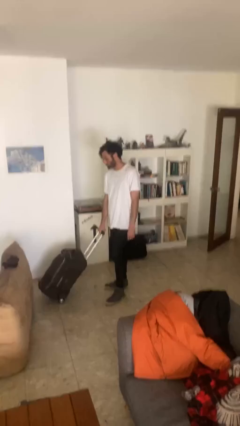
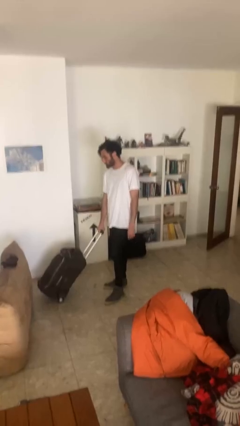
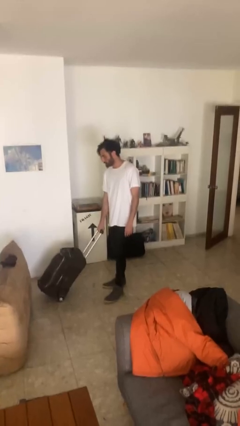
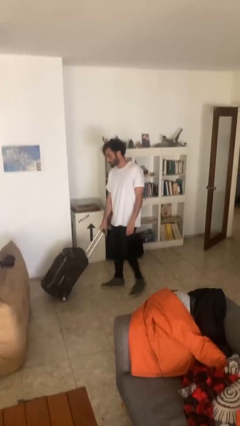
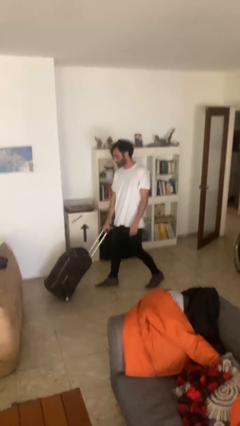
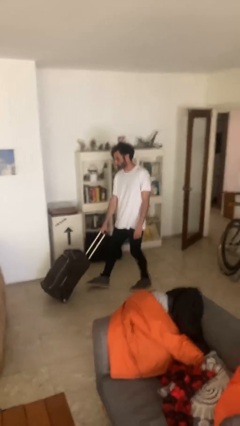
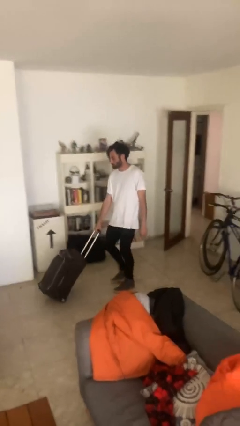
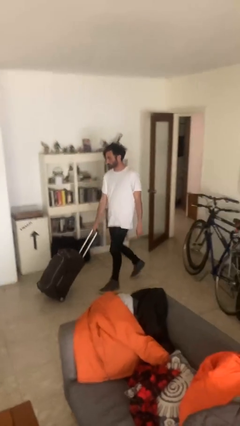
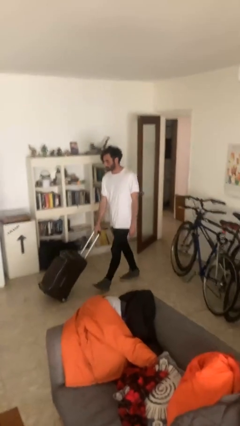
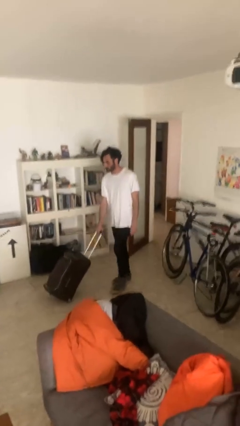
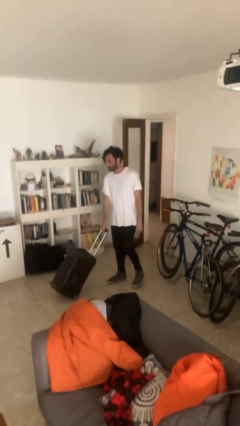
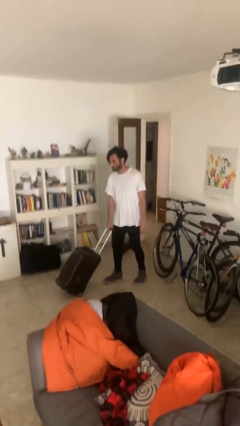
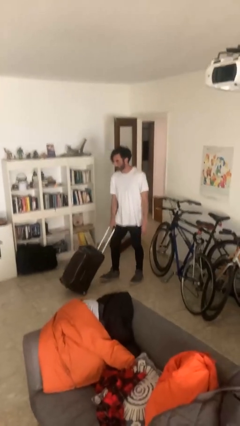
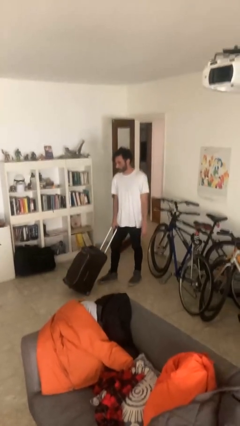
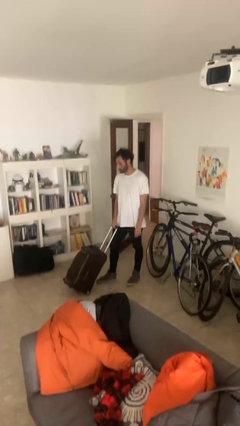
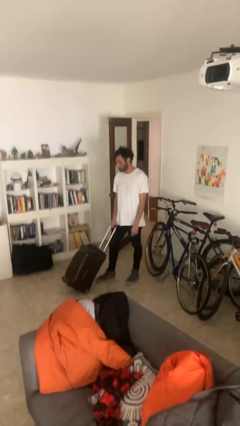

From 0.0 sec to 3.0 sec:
person pulls wheeled cart

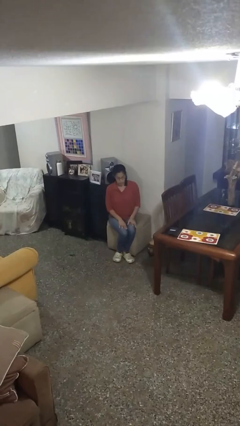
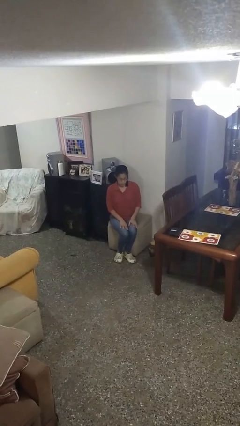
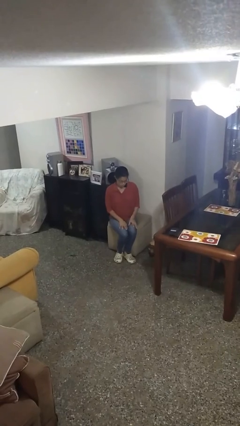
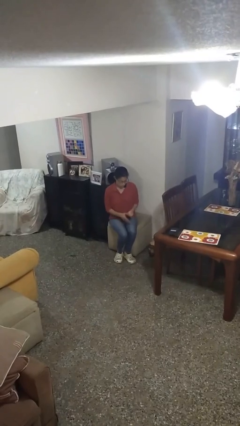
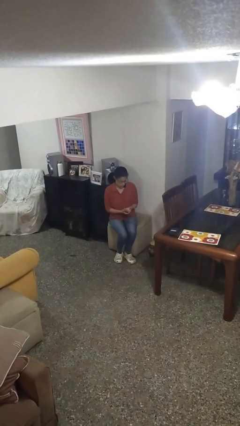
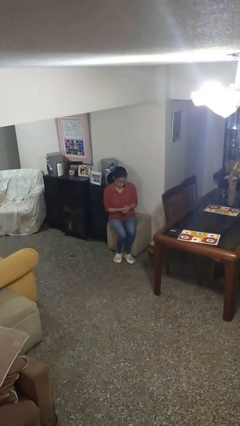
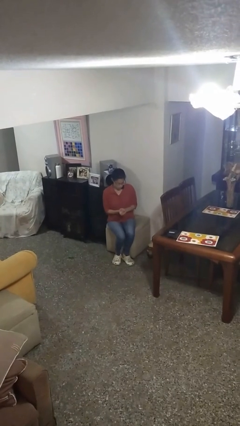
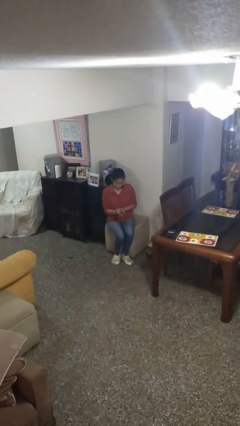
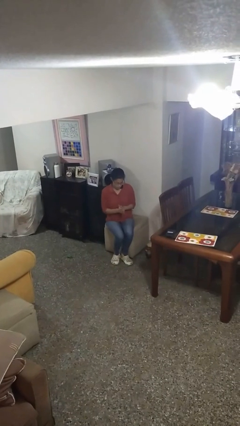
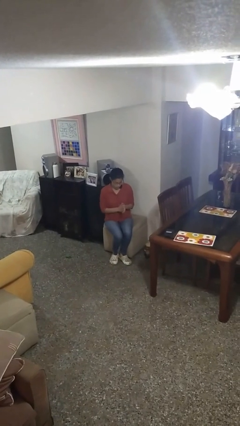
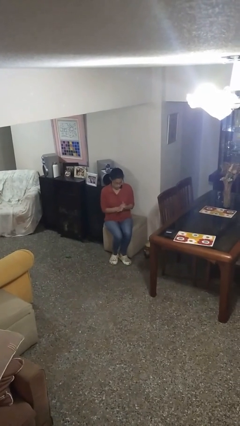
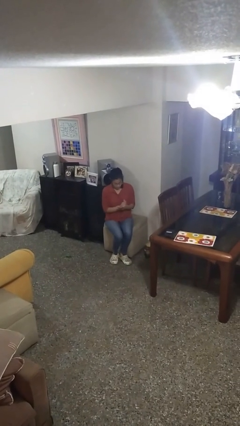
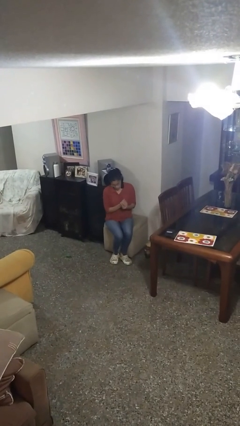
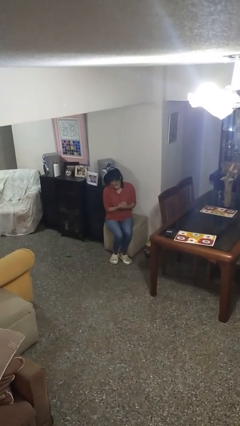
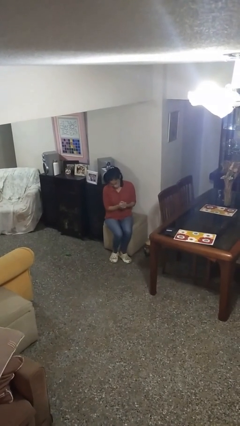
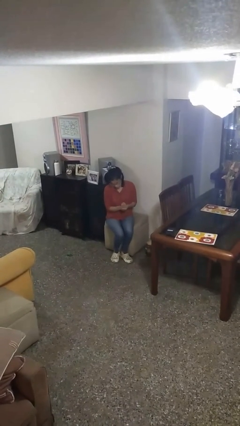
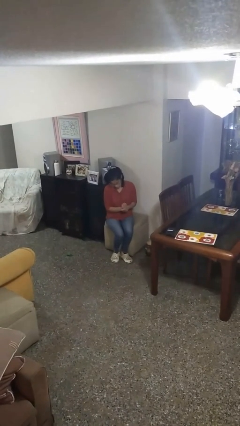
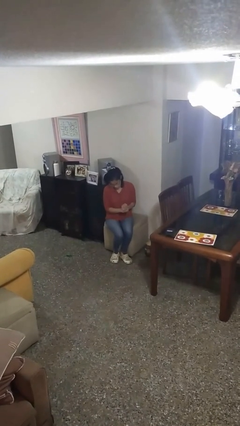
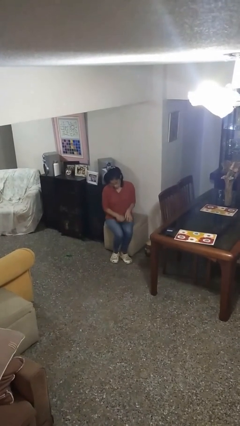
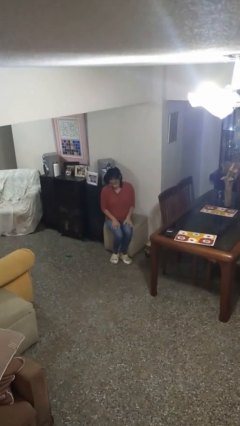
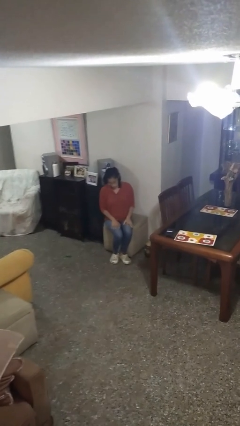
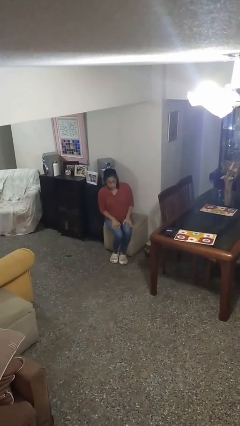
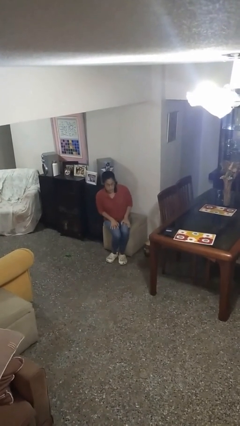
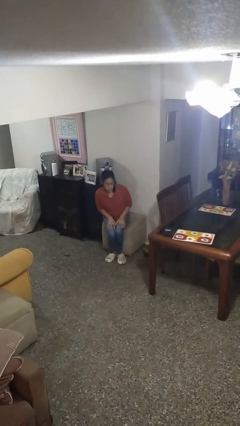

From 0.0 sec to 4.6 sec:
person looks at hands in lap

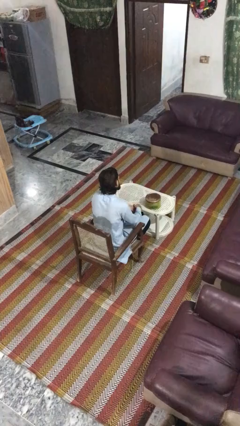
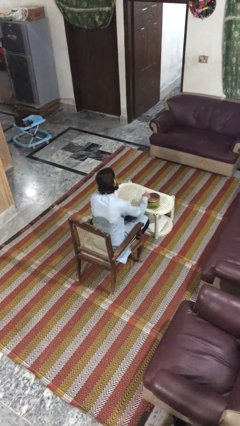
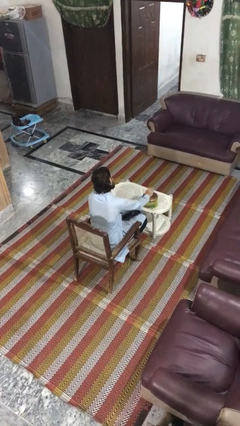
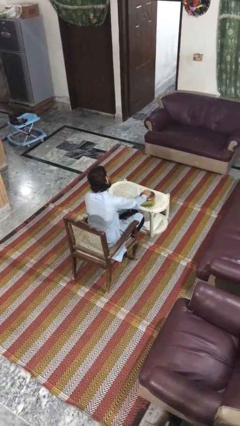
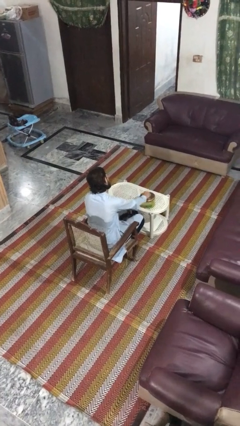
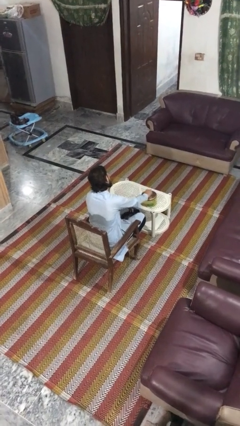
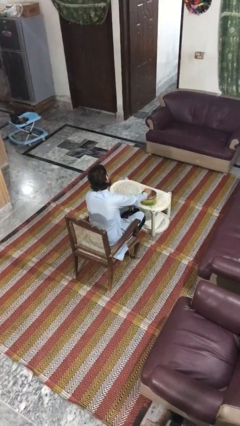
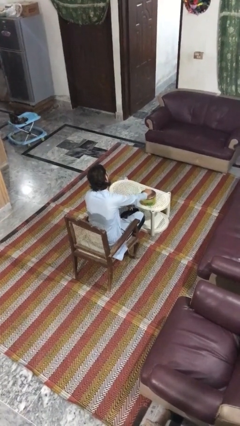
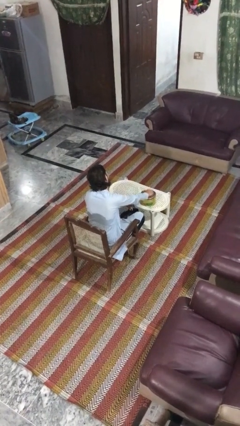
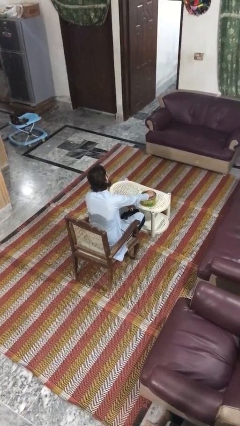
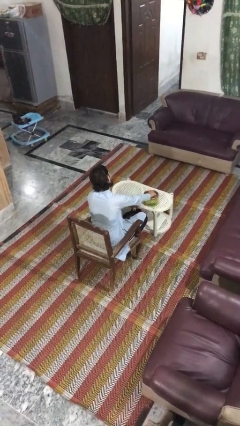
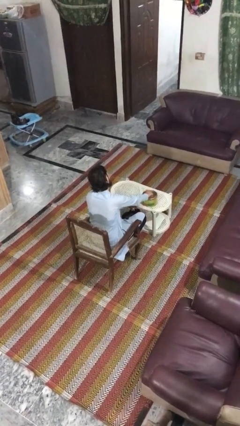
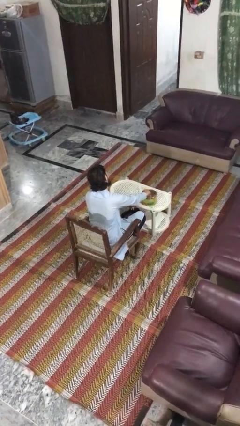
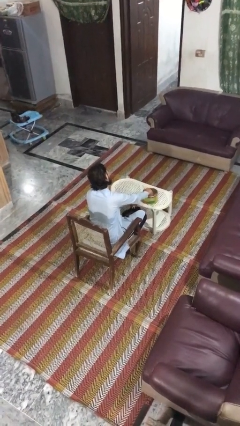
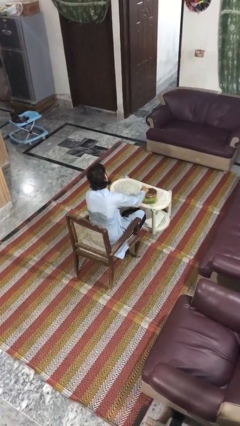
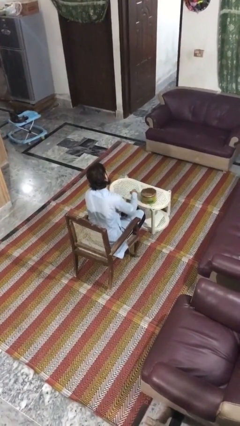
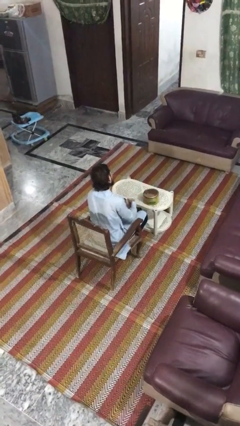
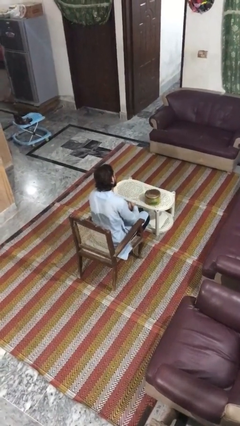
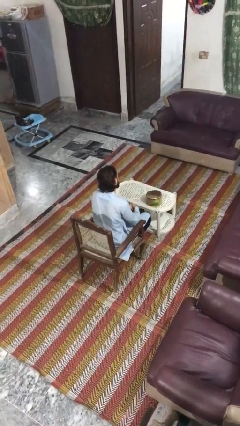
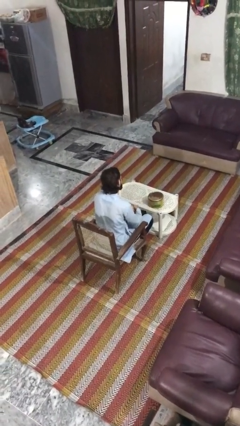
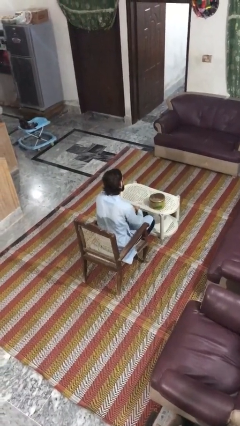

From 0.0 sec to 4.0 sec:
person taps object with finger

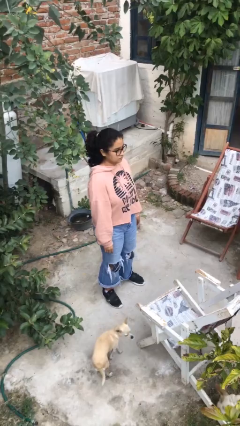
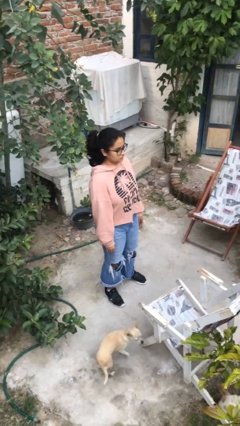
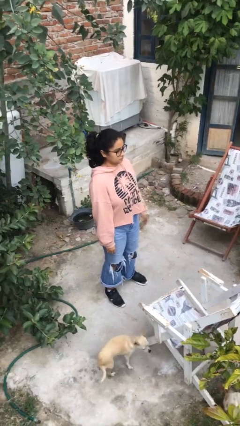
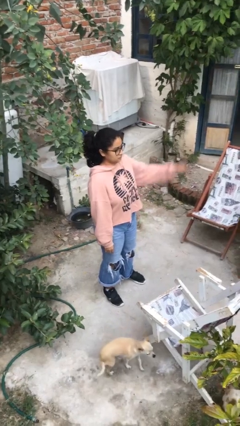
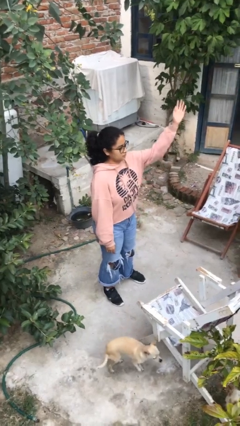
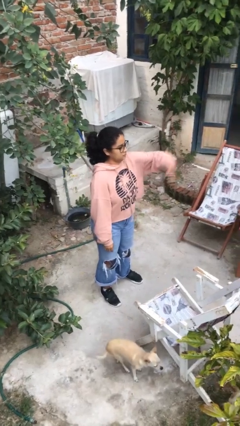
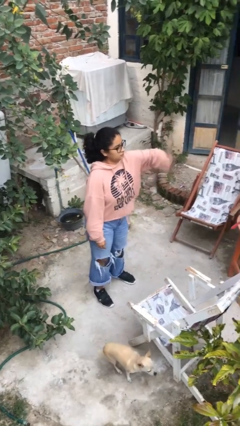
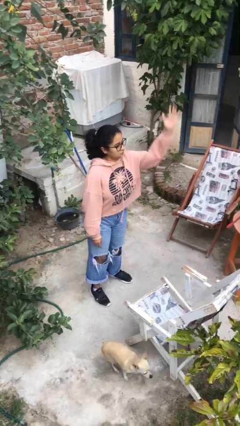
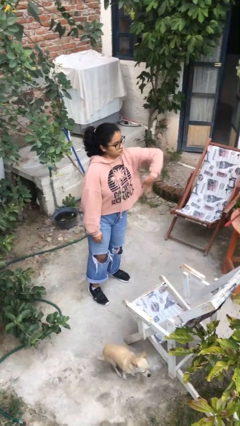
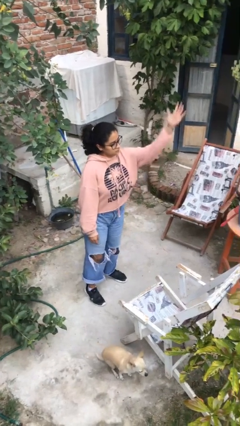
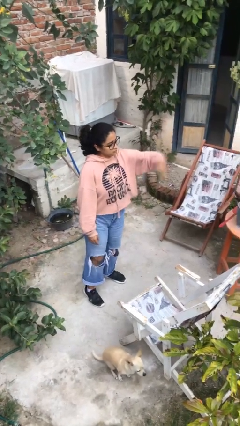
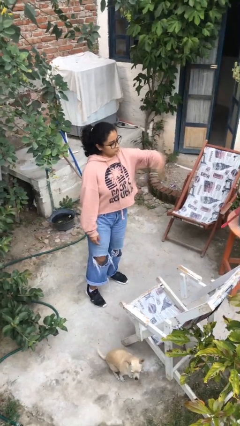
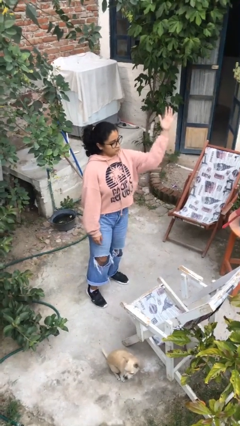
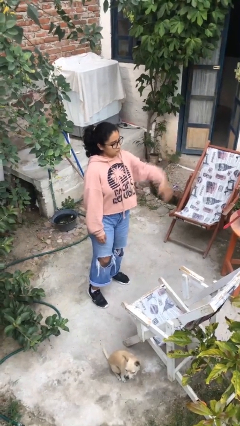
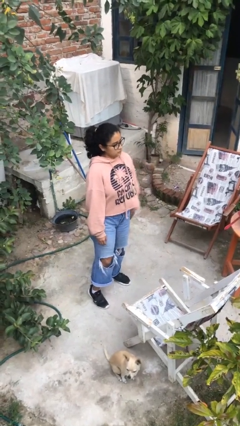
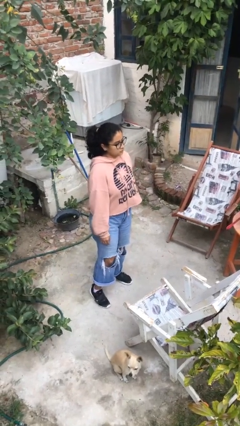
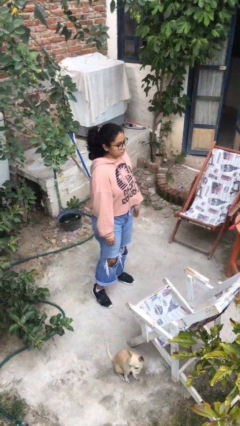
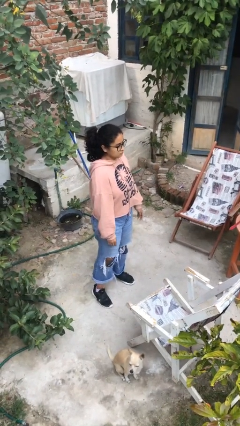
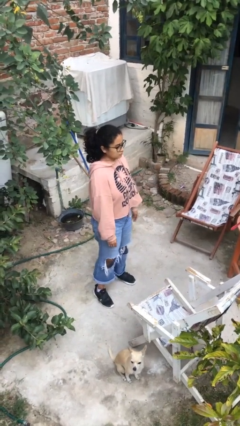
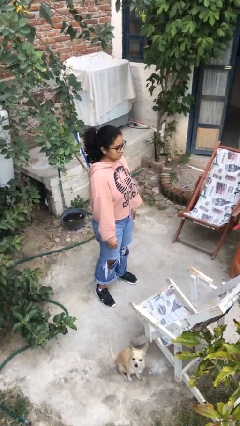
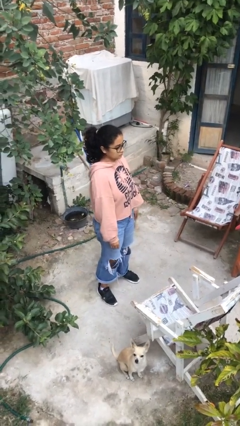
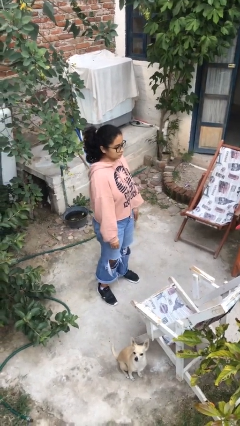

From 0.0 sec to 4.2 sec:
person punches

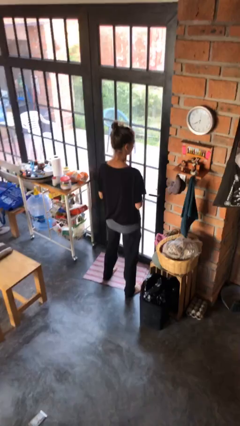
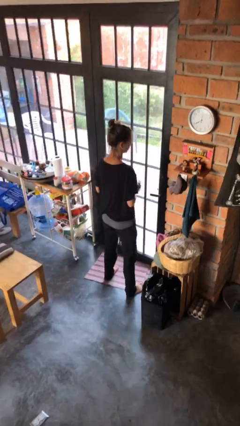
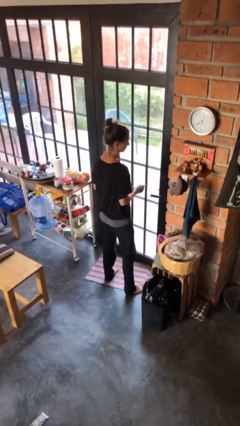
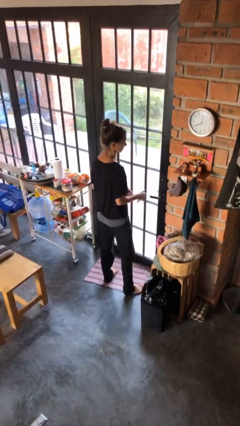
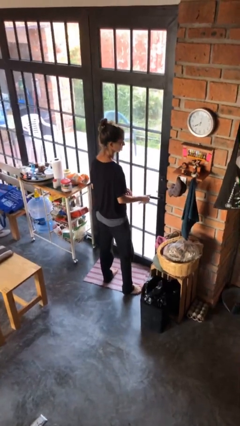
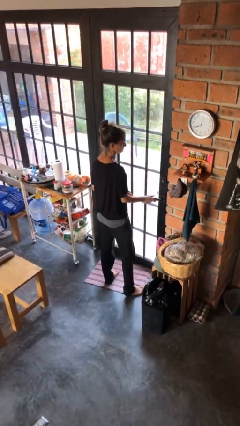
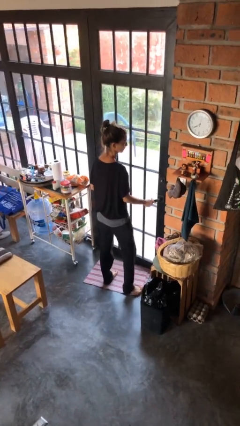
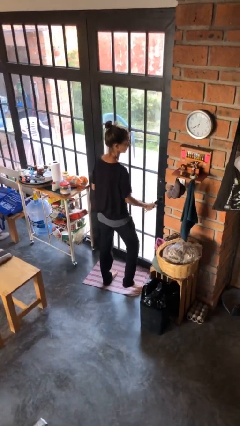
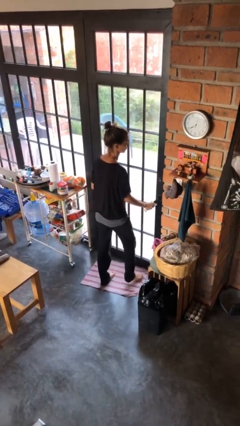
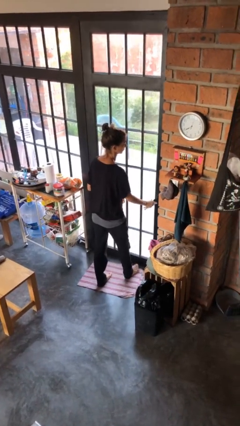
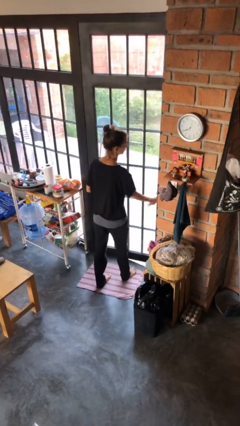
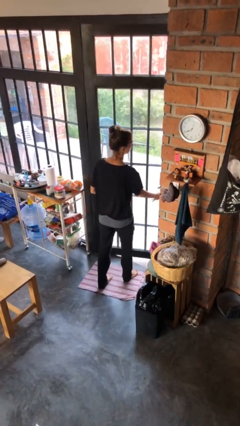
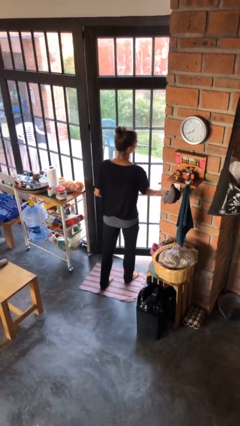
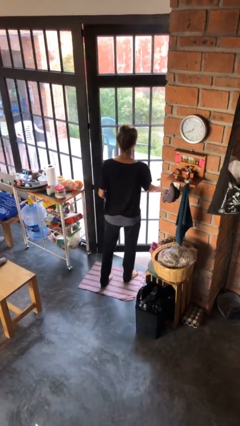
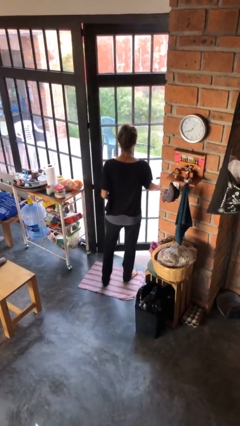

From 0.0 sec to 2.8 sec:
person opens facility door
